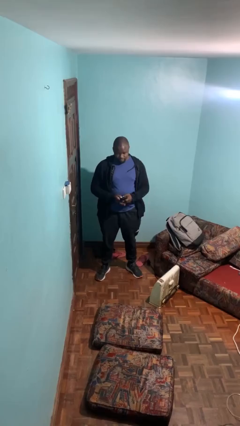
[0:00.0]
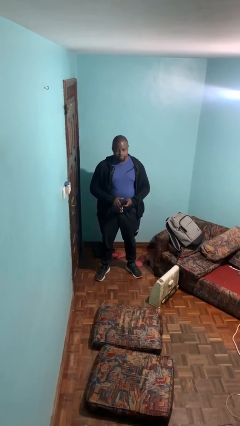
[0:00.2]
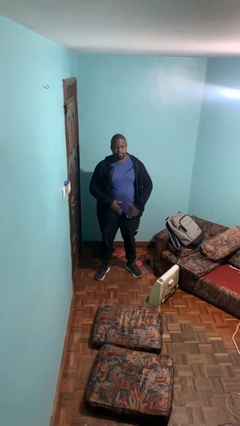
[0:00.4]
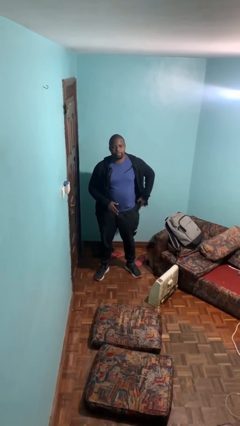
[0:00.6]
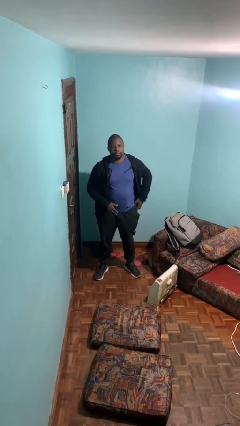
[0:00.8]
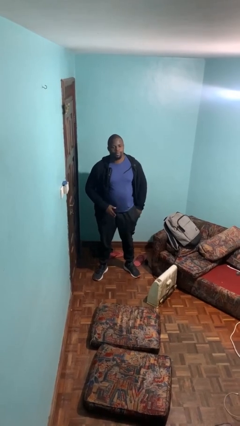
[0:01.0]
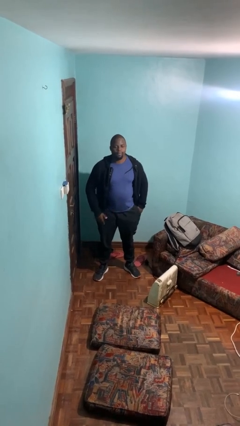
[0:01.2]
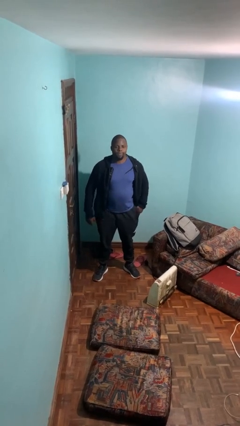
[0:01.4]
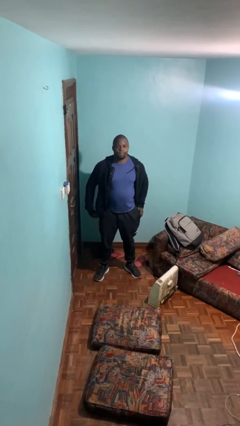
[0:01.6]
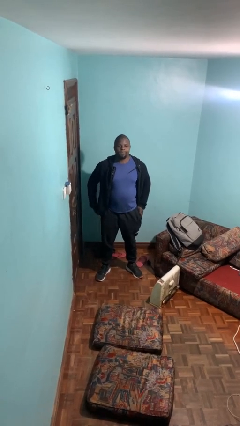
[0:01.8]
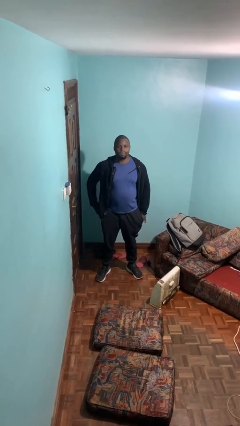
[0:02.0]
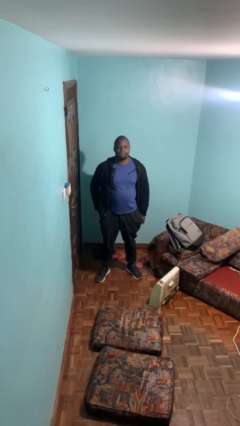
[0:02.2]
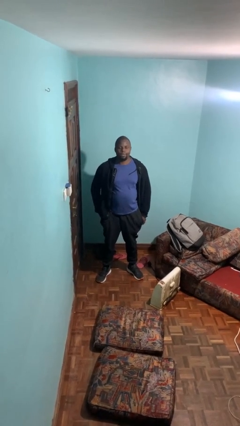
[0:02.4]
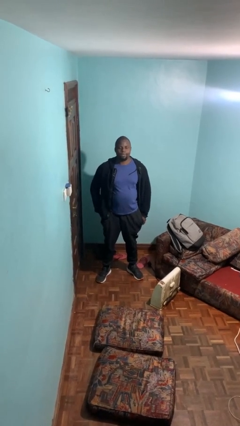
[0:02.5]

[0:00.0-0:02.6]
person puts phone into pocket

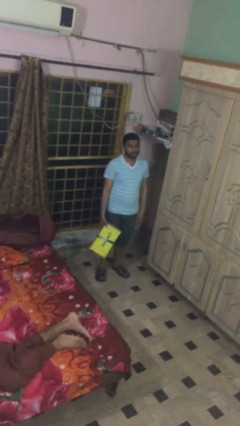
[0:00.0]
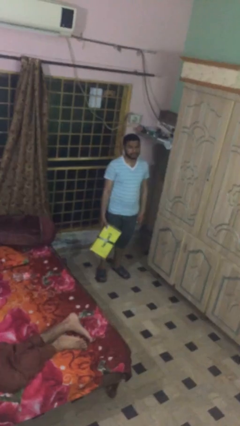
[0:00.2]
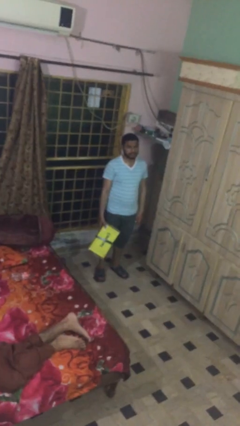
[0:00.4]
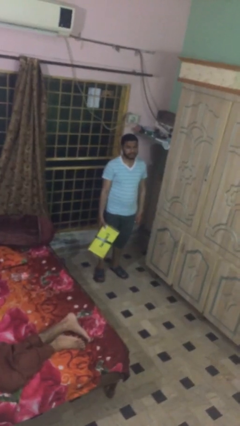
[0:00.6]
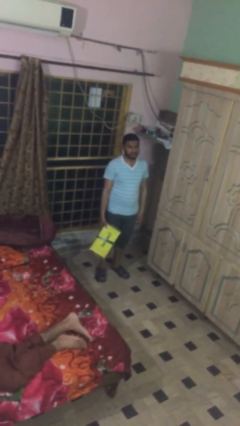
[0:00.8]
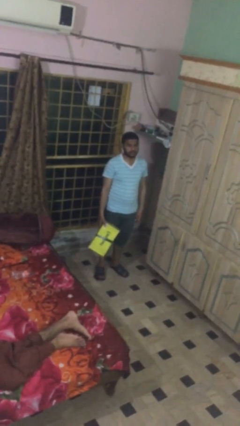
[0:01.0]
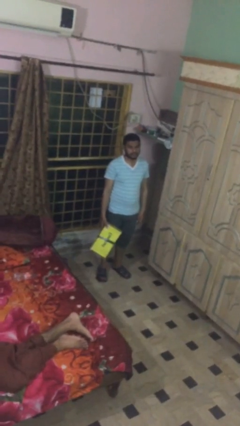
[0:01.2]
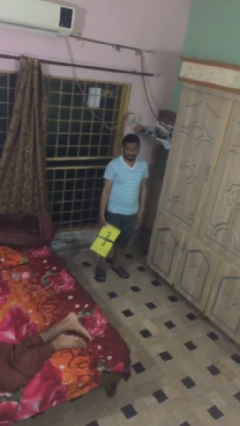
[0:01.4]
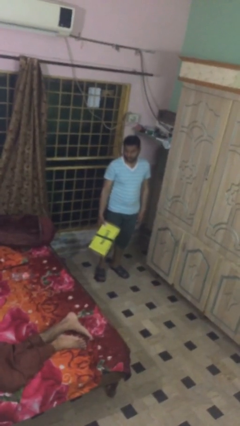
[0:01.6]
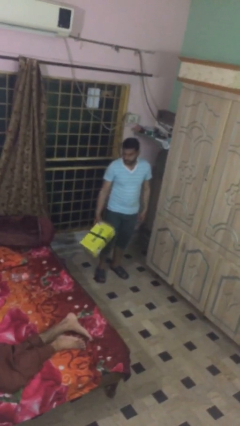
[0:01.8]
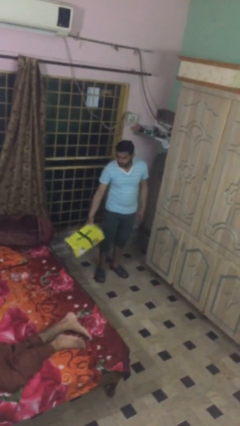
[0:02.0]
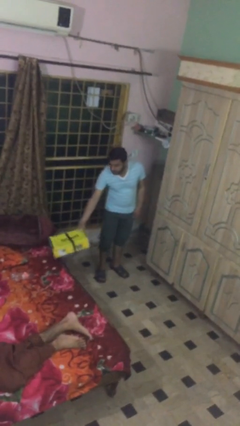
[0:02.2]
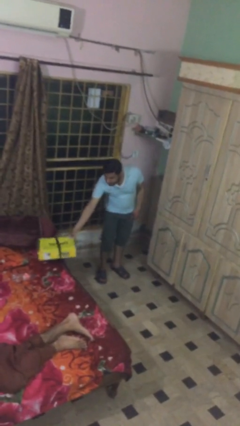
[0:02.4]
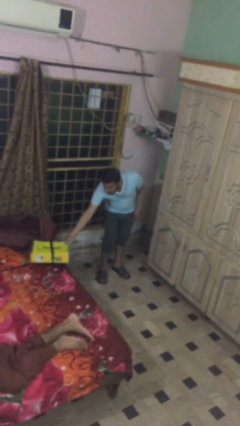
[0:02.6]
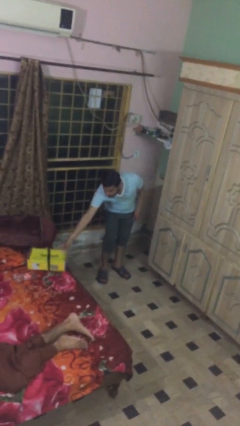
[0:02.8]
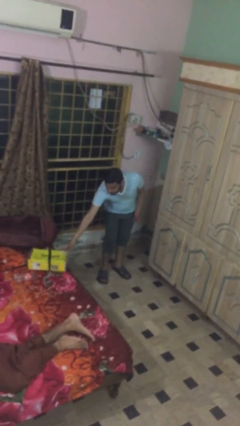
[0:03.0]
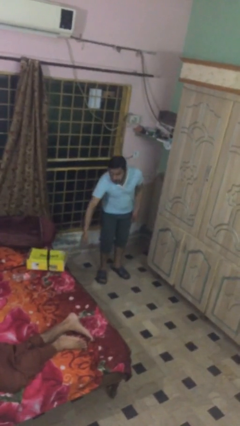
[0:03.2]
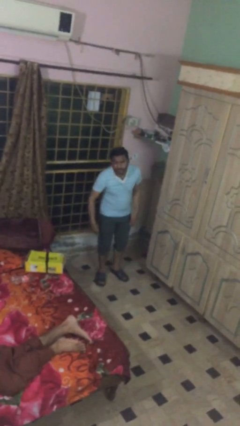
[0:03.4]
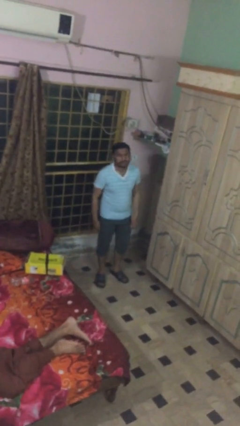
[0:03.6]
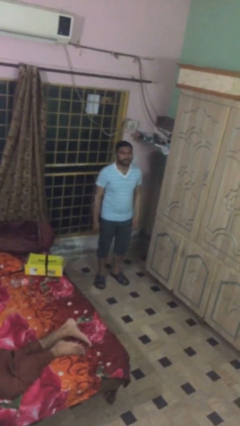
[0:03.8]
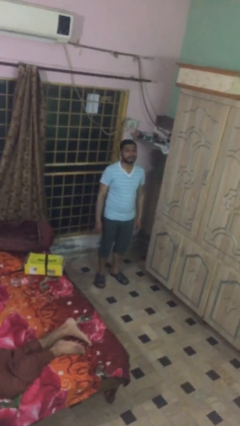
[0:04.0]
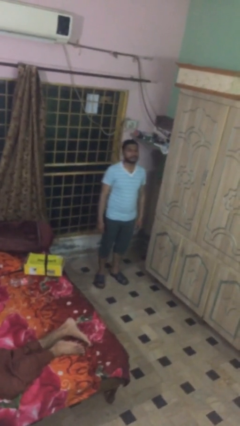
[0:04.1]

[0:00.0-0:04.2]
person puts down object on table

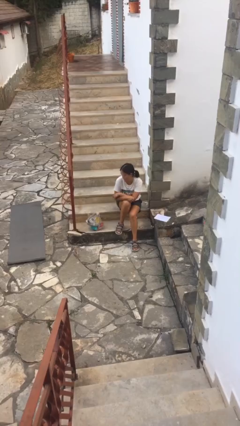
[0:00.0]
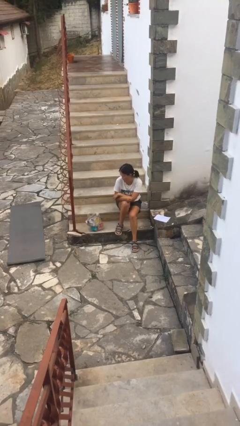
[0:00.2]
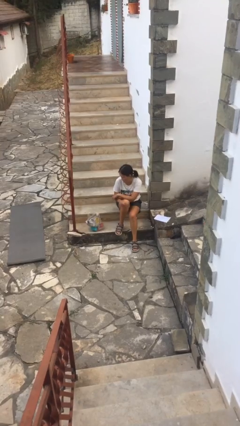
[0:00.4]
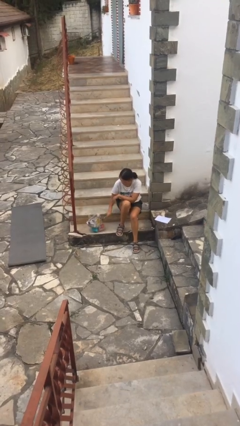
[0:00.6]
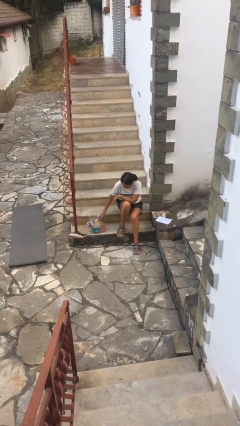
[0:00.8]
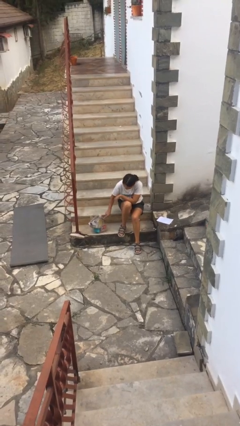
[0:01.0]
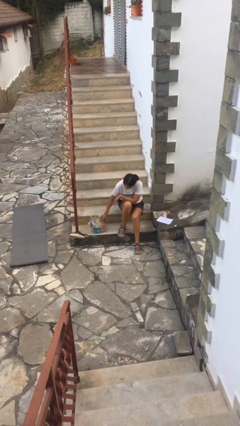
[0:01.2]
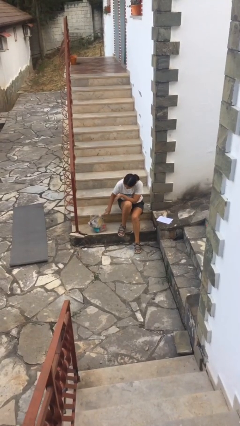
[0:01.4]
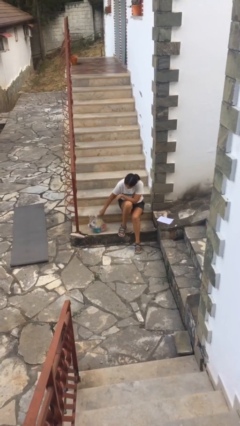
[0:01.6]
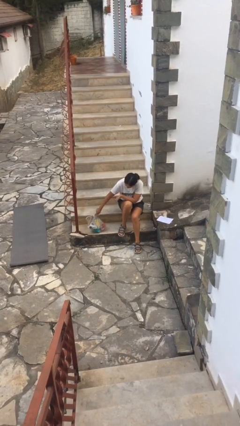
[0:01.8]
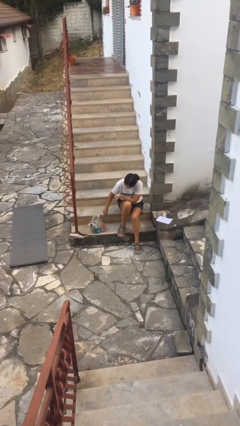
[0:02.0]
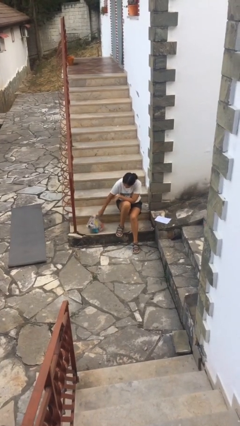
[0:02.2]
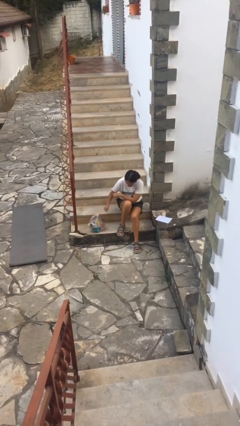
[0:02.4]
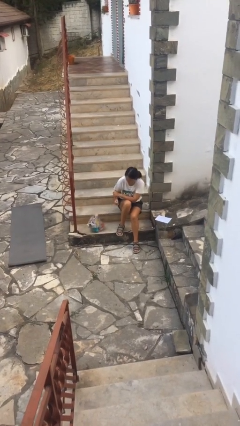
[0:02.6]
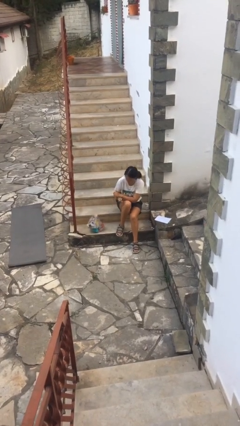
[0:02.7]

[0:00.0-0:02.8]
person taps object with finger

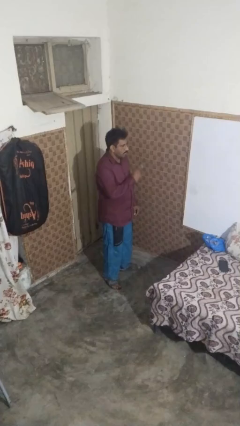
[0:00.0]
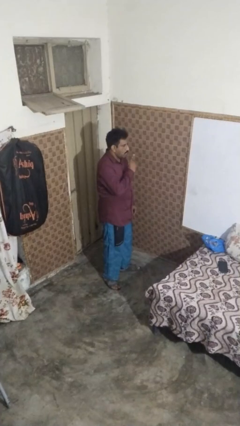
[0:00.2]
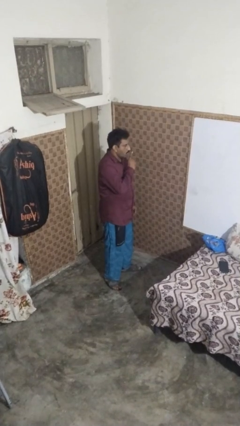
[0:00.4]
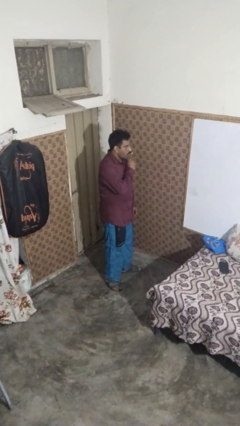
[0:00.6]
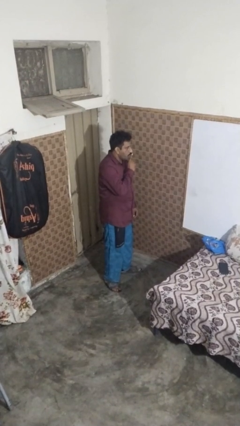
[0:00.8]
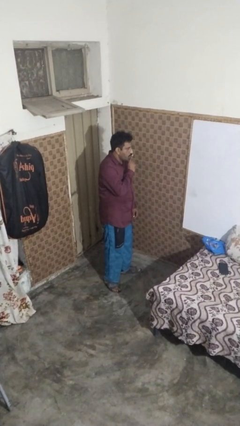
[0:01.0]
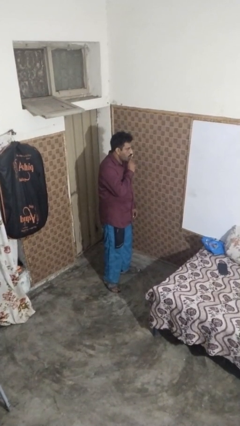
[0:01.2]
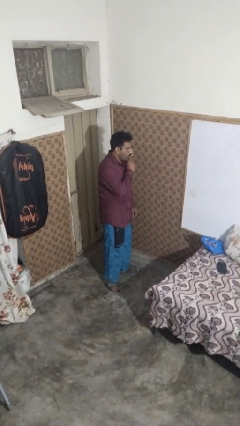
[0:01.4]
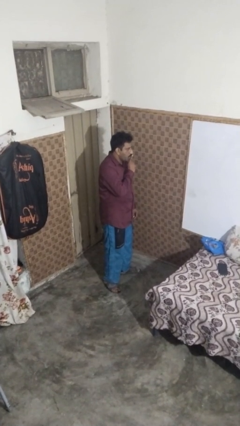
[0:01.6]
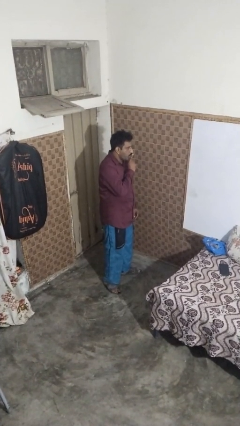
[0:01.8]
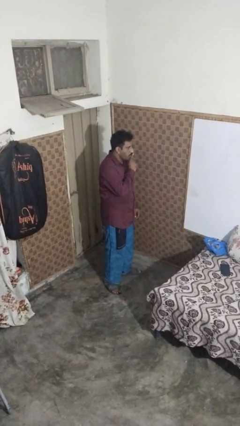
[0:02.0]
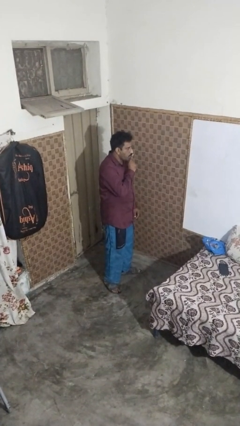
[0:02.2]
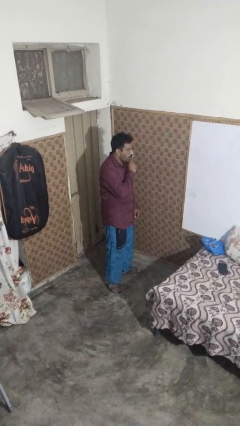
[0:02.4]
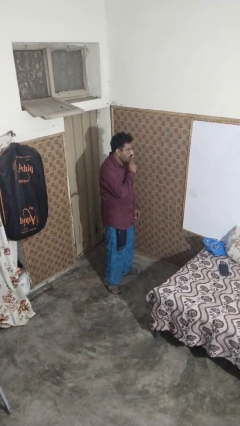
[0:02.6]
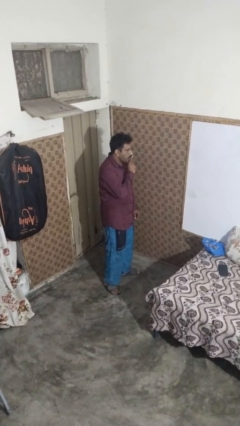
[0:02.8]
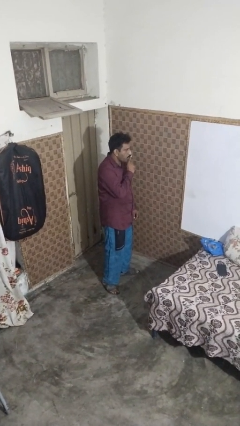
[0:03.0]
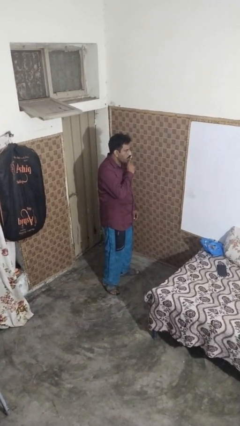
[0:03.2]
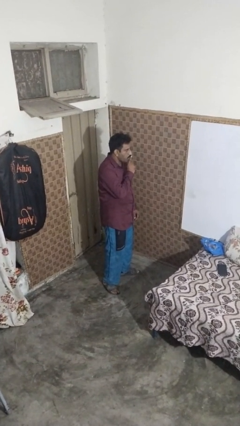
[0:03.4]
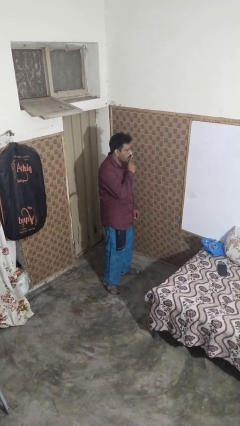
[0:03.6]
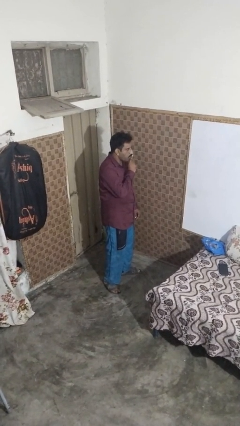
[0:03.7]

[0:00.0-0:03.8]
person gestures be quiet

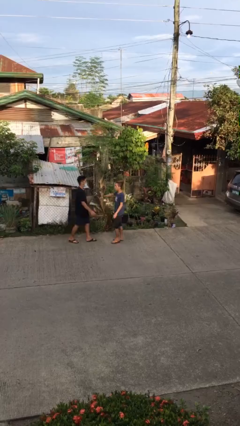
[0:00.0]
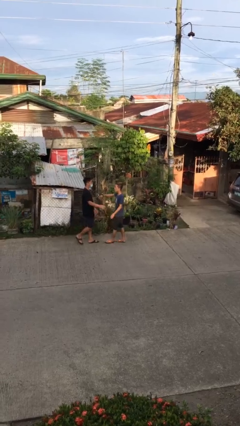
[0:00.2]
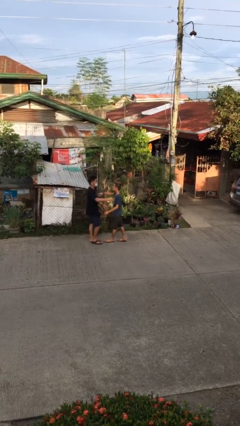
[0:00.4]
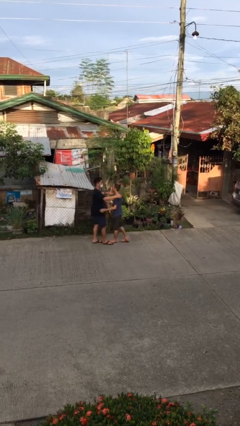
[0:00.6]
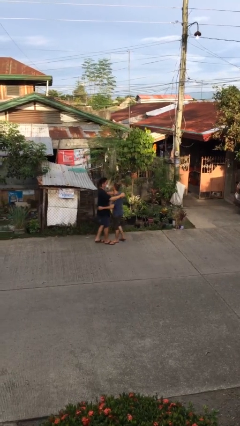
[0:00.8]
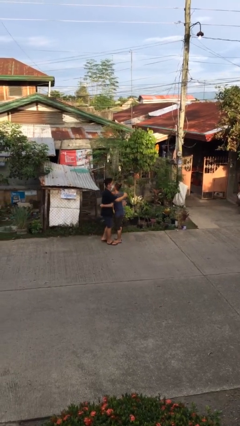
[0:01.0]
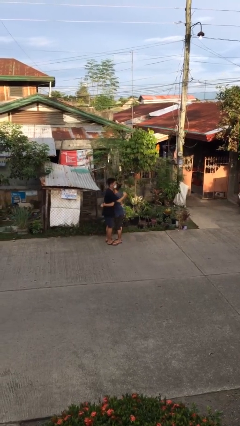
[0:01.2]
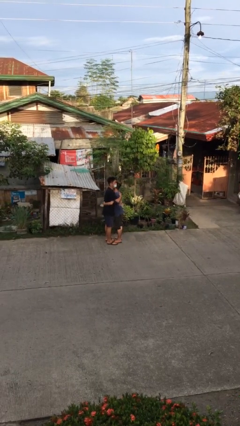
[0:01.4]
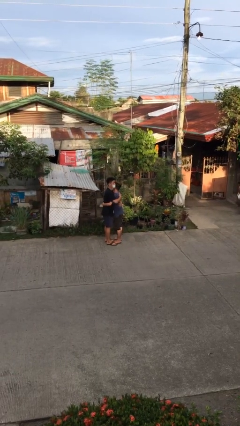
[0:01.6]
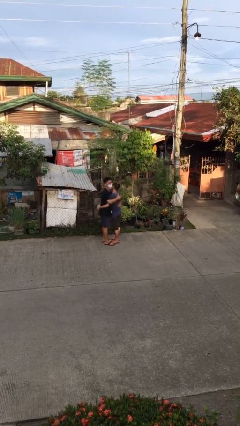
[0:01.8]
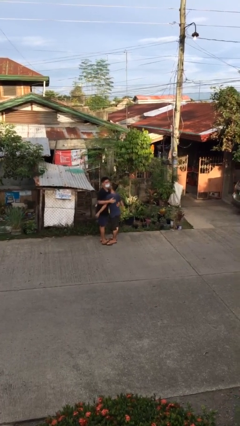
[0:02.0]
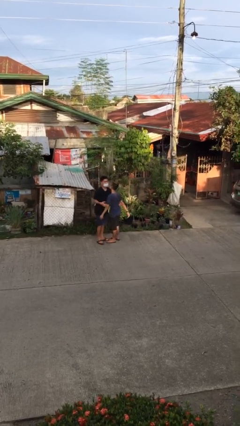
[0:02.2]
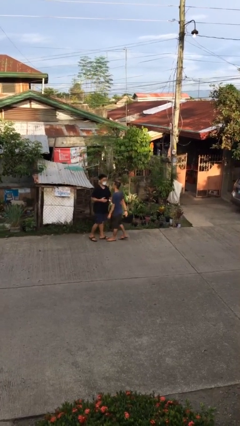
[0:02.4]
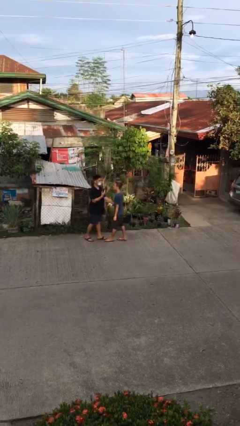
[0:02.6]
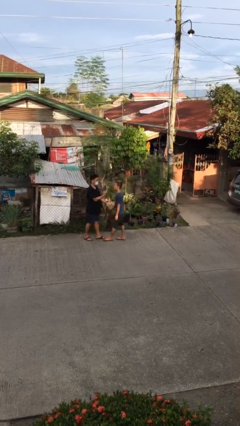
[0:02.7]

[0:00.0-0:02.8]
person embraces person

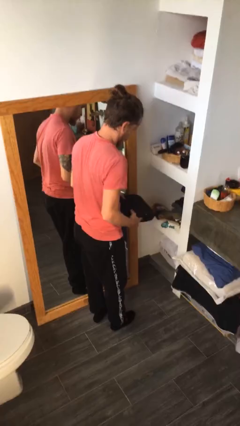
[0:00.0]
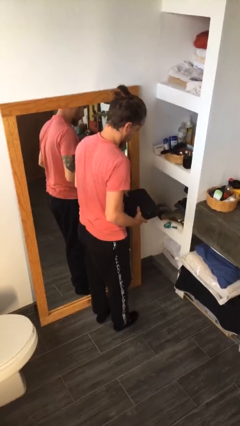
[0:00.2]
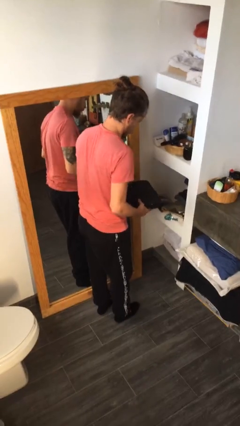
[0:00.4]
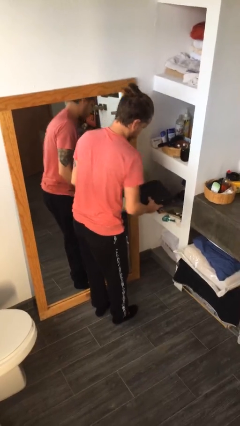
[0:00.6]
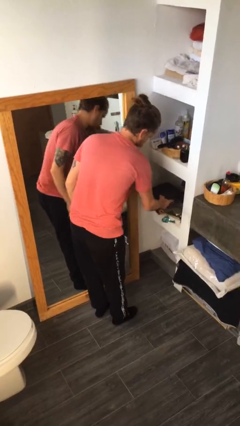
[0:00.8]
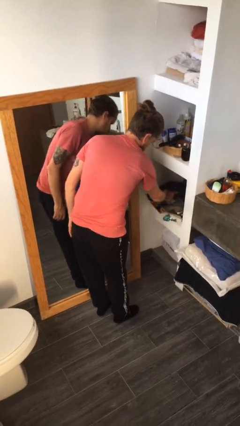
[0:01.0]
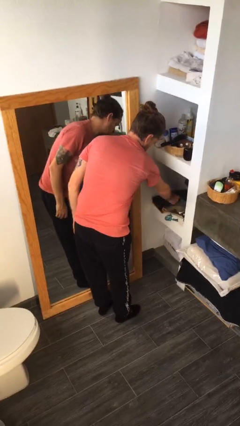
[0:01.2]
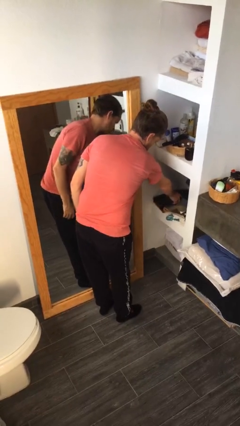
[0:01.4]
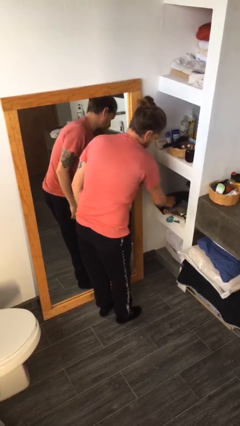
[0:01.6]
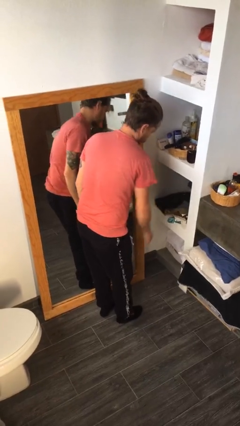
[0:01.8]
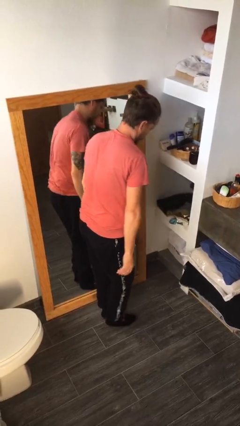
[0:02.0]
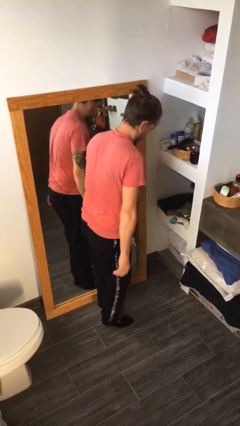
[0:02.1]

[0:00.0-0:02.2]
person puts down object into cabinet
